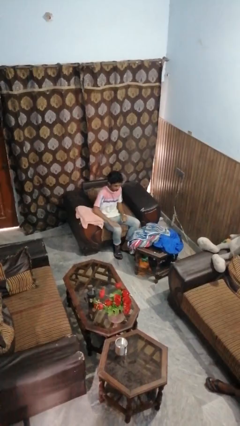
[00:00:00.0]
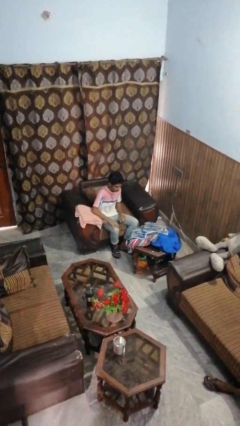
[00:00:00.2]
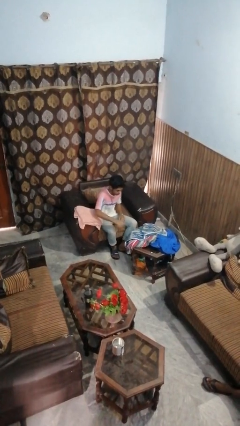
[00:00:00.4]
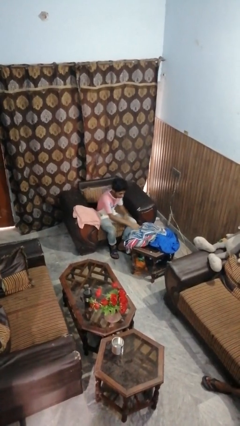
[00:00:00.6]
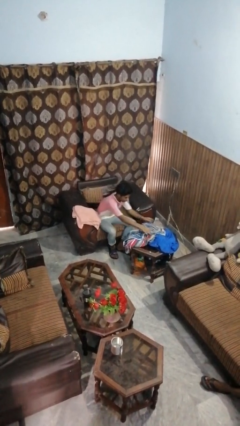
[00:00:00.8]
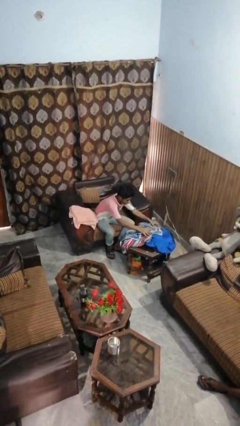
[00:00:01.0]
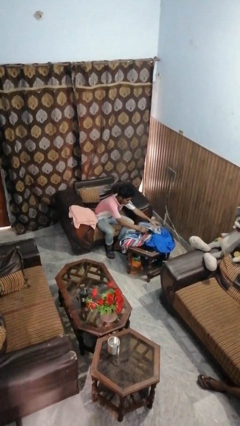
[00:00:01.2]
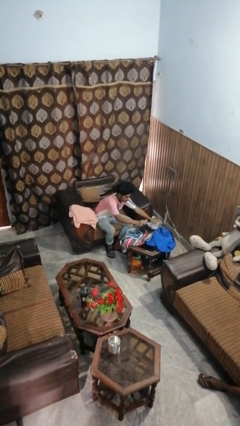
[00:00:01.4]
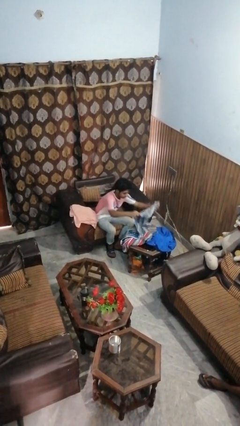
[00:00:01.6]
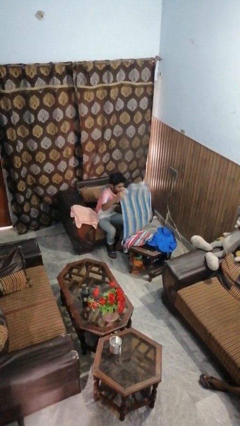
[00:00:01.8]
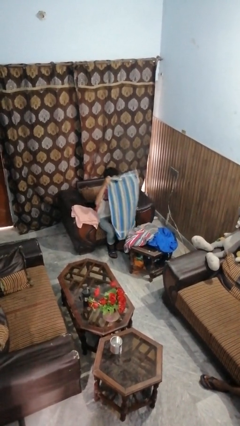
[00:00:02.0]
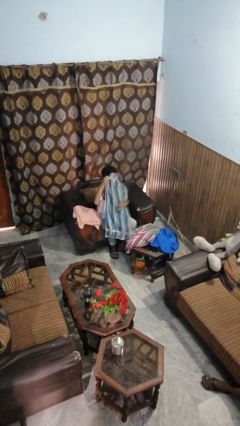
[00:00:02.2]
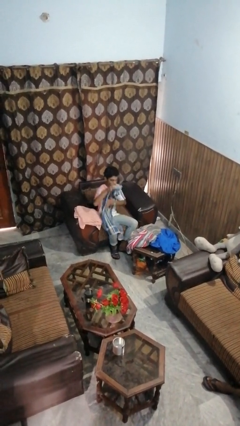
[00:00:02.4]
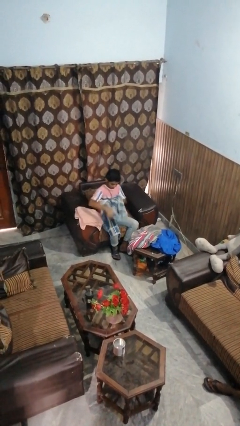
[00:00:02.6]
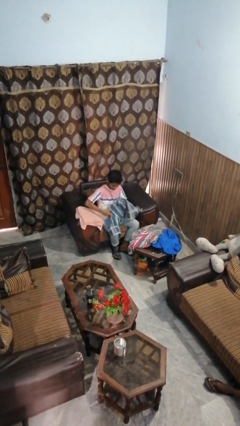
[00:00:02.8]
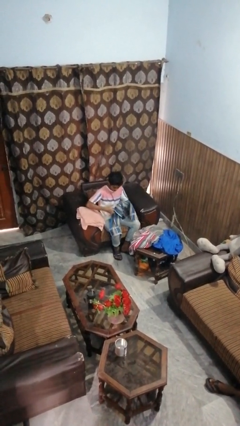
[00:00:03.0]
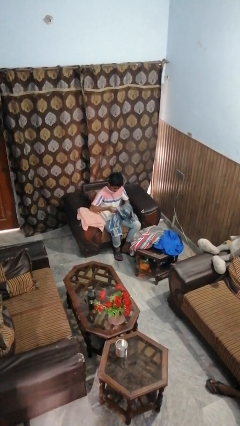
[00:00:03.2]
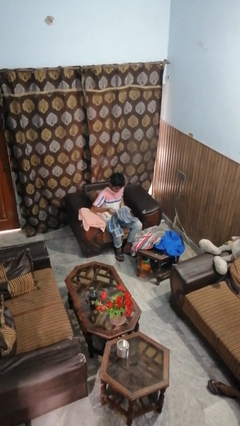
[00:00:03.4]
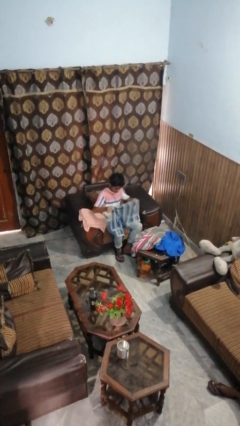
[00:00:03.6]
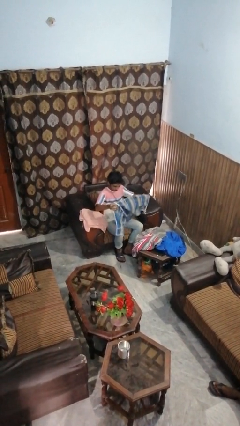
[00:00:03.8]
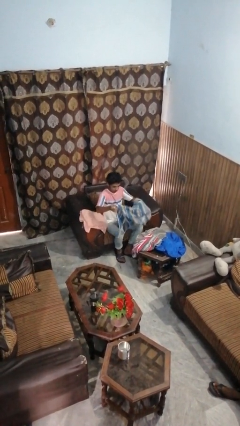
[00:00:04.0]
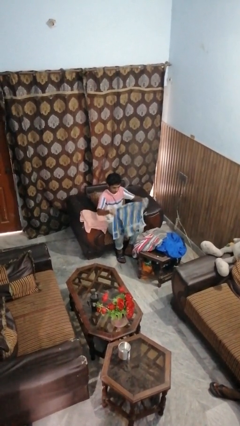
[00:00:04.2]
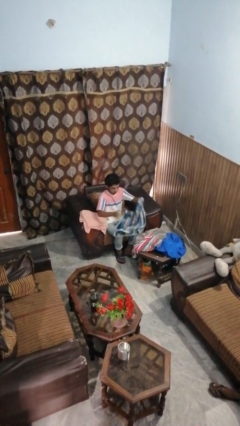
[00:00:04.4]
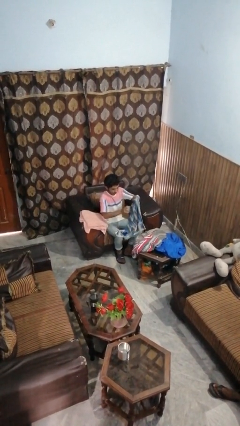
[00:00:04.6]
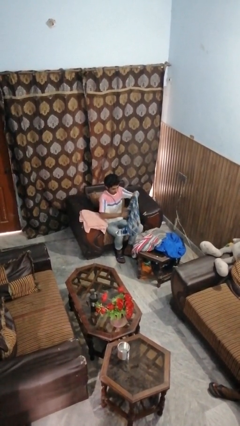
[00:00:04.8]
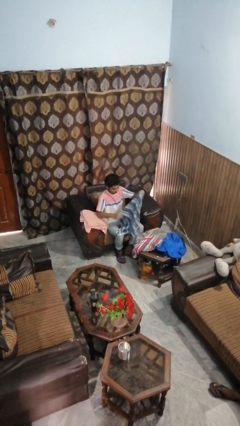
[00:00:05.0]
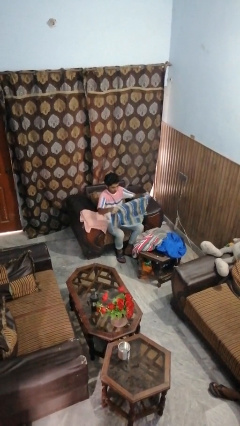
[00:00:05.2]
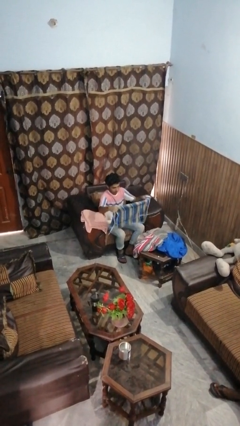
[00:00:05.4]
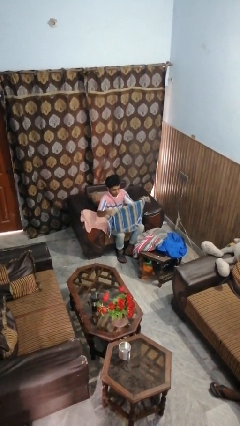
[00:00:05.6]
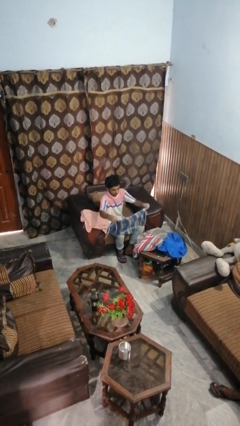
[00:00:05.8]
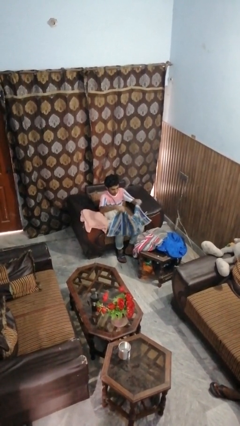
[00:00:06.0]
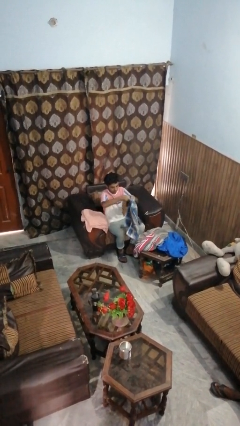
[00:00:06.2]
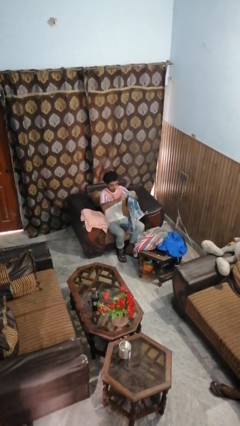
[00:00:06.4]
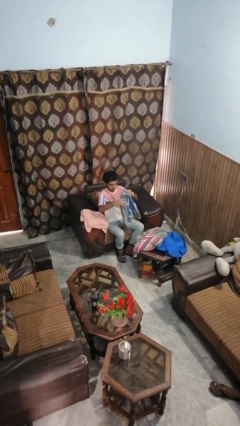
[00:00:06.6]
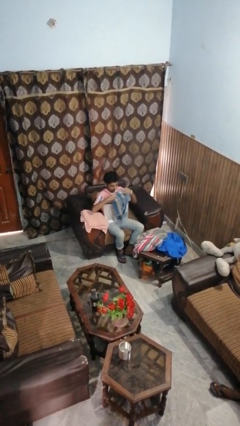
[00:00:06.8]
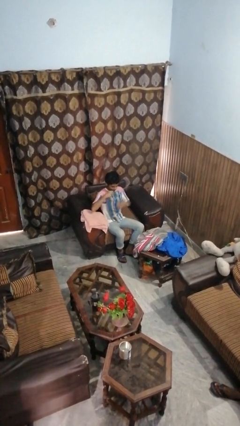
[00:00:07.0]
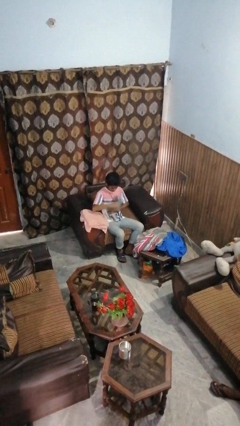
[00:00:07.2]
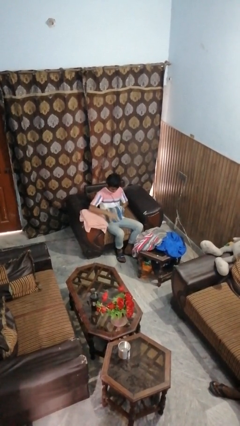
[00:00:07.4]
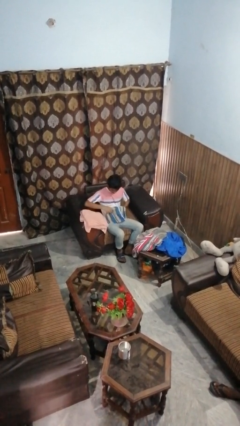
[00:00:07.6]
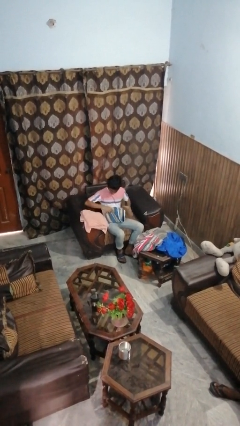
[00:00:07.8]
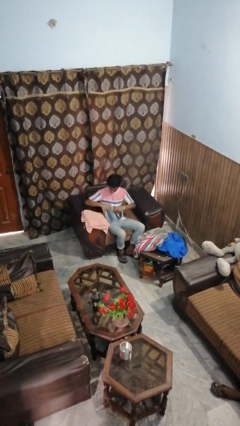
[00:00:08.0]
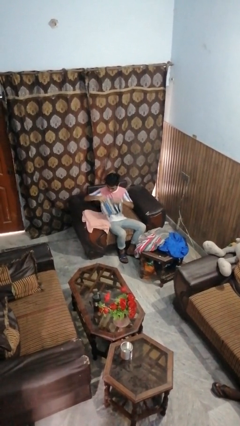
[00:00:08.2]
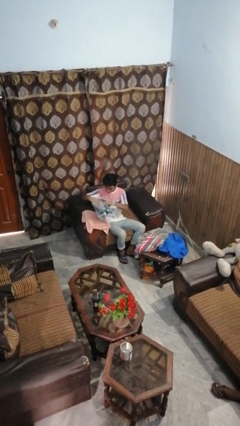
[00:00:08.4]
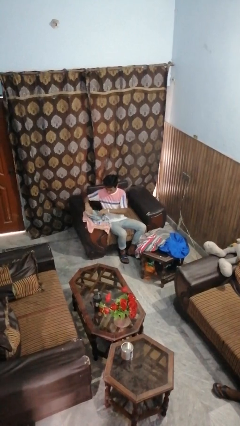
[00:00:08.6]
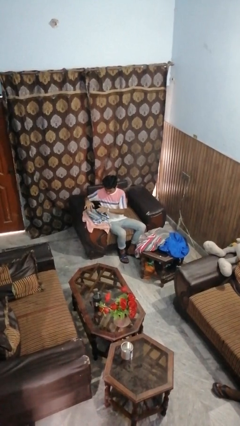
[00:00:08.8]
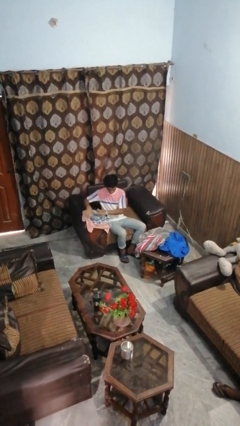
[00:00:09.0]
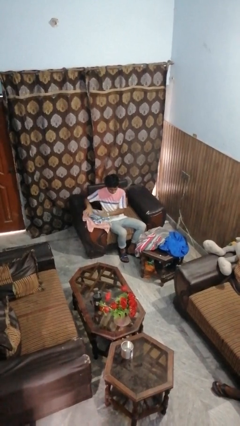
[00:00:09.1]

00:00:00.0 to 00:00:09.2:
person folds towel

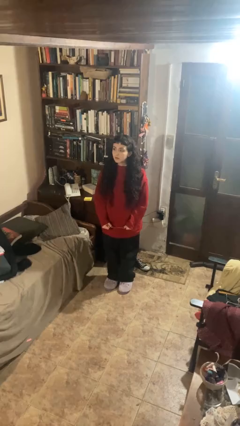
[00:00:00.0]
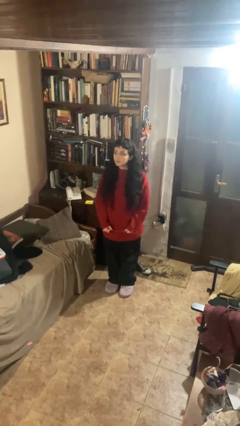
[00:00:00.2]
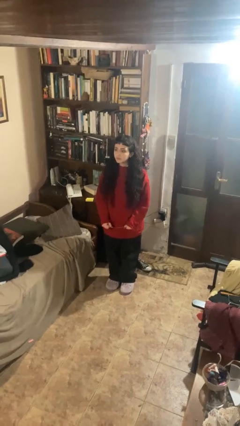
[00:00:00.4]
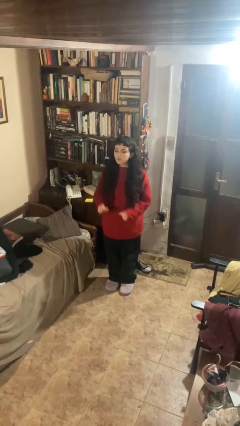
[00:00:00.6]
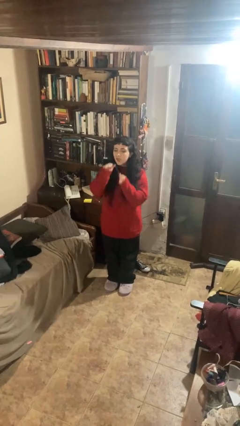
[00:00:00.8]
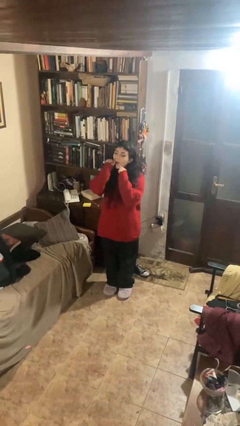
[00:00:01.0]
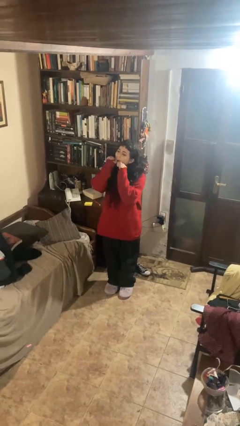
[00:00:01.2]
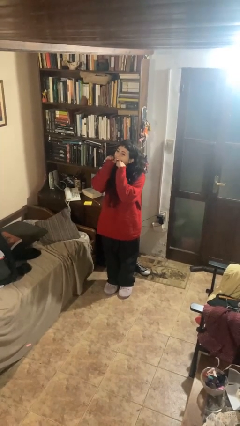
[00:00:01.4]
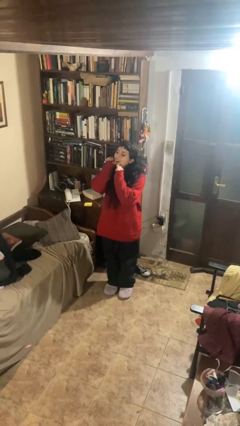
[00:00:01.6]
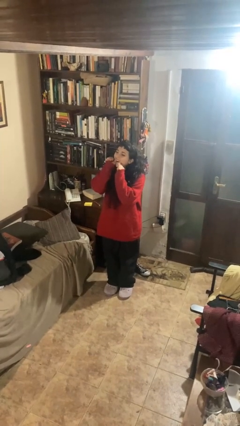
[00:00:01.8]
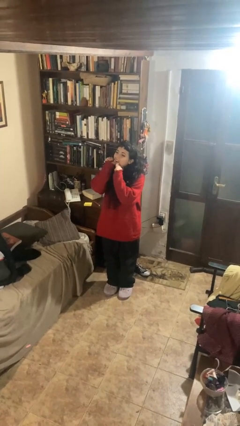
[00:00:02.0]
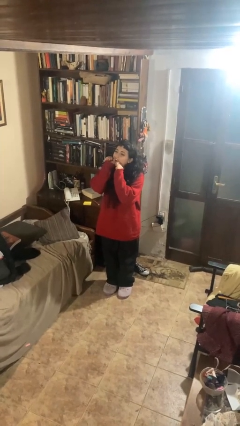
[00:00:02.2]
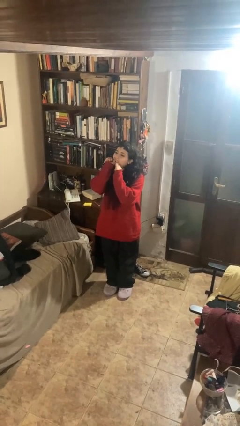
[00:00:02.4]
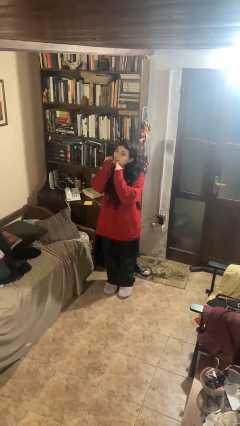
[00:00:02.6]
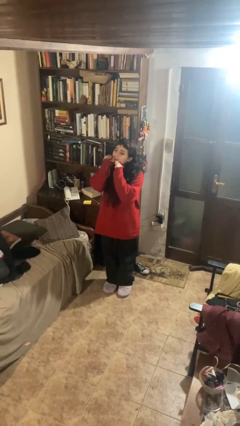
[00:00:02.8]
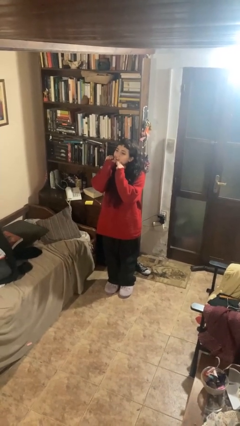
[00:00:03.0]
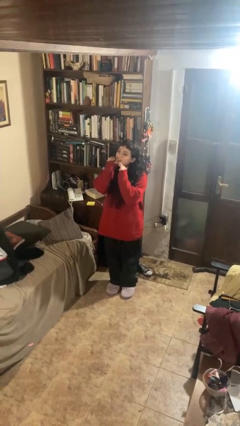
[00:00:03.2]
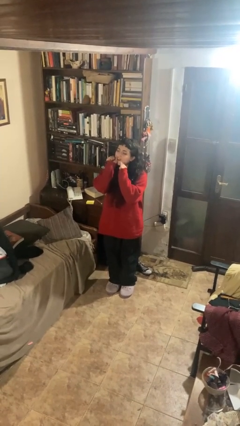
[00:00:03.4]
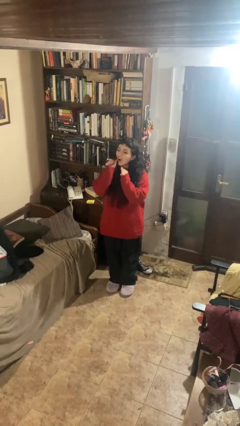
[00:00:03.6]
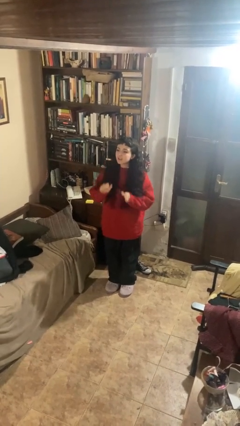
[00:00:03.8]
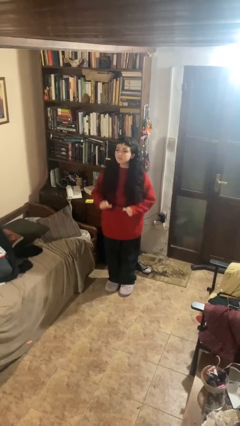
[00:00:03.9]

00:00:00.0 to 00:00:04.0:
person flosses

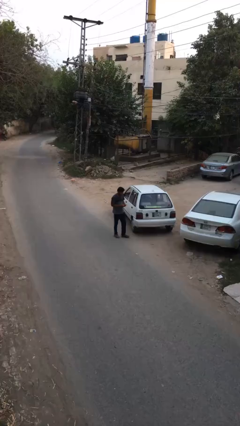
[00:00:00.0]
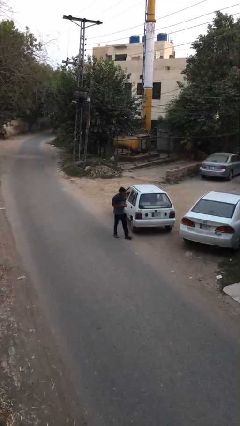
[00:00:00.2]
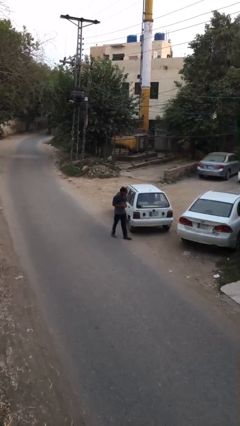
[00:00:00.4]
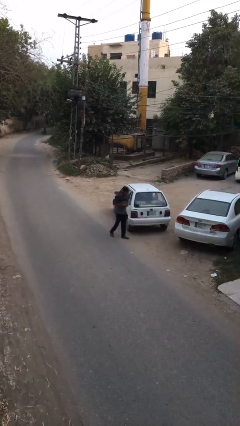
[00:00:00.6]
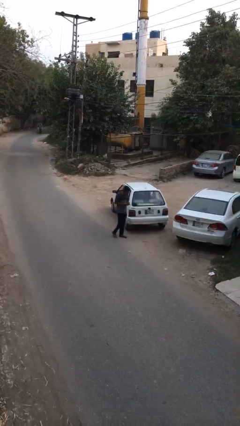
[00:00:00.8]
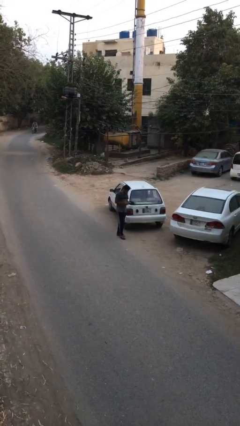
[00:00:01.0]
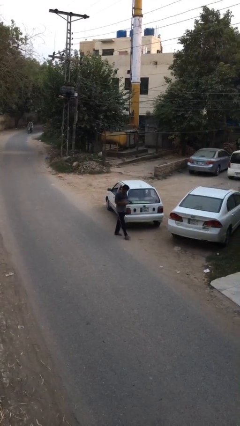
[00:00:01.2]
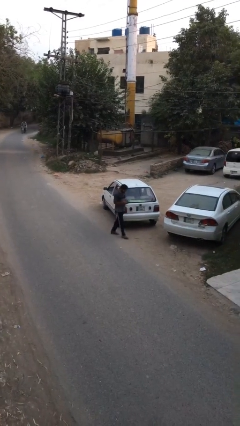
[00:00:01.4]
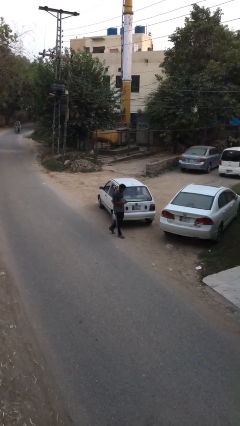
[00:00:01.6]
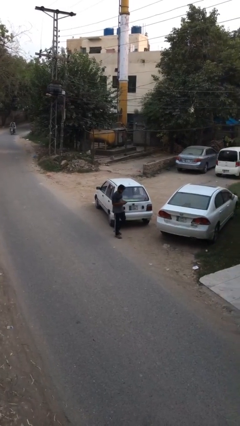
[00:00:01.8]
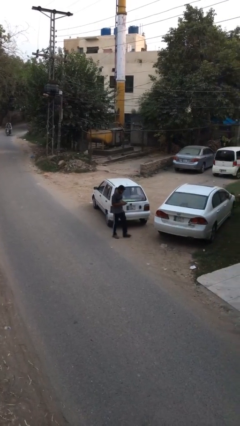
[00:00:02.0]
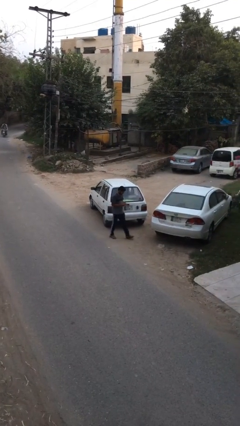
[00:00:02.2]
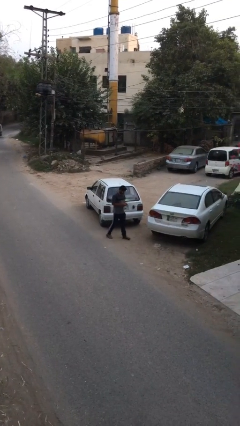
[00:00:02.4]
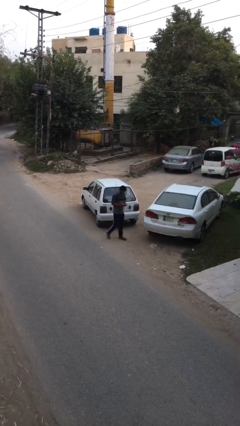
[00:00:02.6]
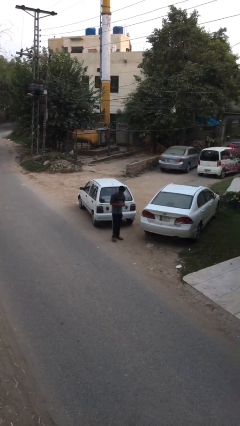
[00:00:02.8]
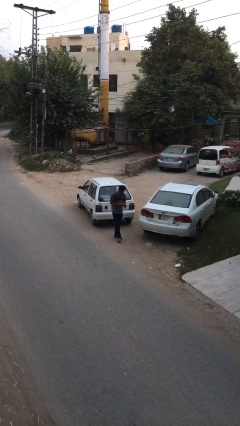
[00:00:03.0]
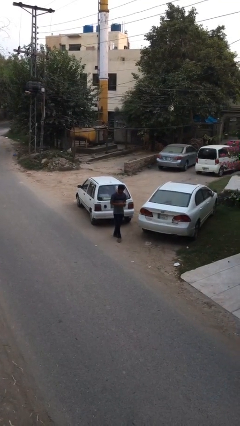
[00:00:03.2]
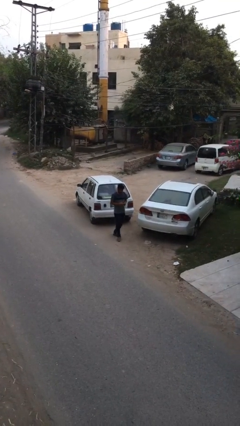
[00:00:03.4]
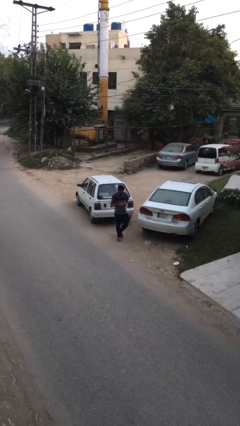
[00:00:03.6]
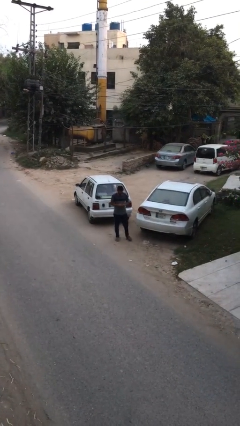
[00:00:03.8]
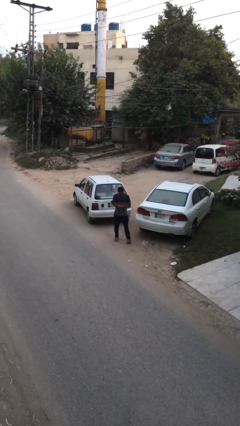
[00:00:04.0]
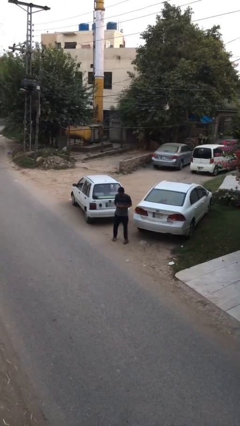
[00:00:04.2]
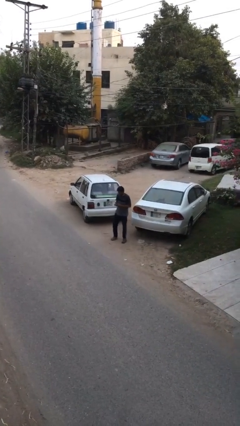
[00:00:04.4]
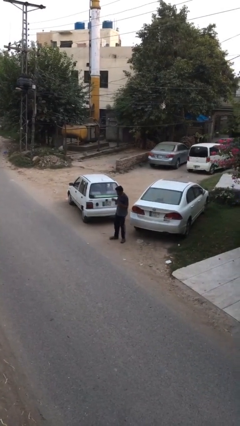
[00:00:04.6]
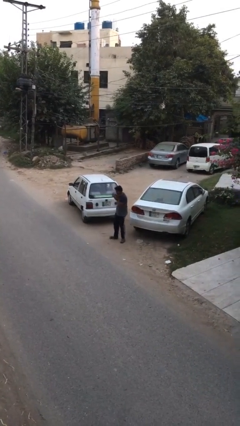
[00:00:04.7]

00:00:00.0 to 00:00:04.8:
person texts on phone
